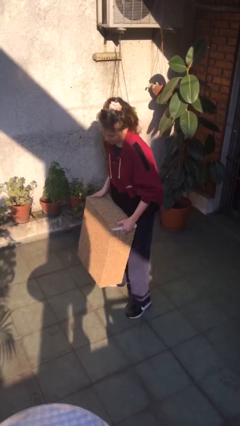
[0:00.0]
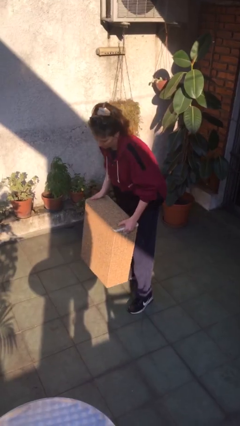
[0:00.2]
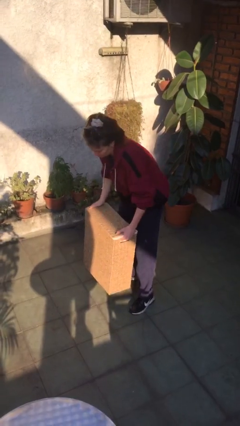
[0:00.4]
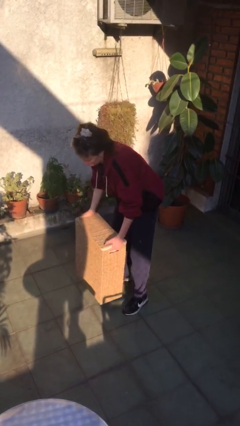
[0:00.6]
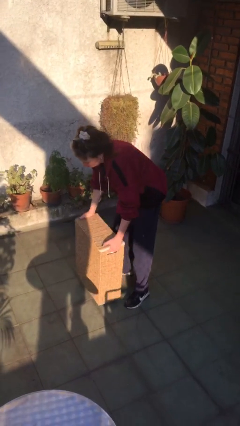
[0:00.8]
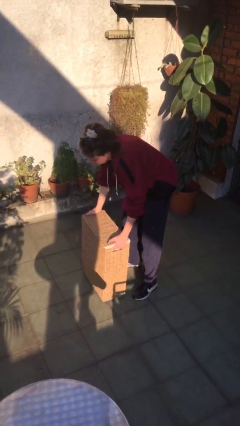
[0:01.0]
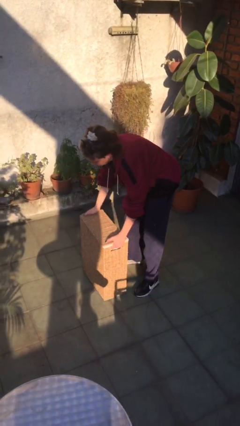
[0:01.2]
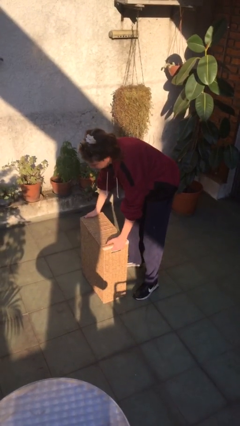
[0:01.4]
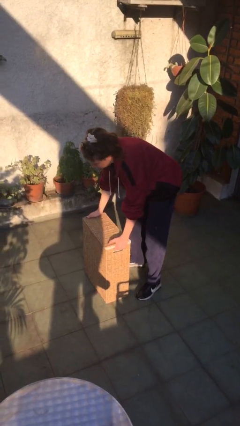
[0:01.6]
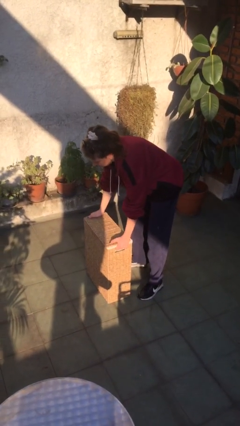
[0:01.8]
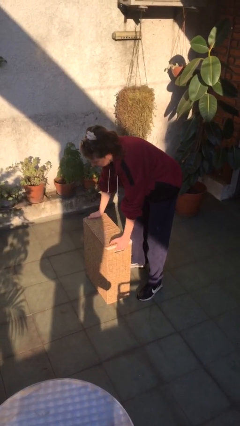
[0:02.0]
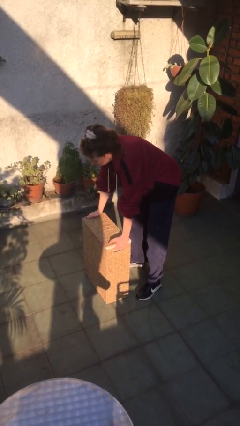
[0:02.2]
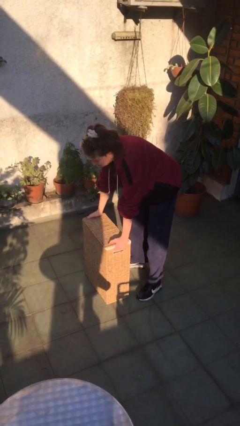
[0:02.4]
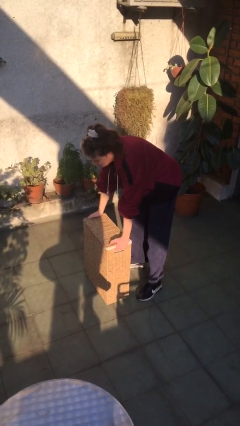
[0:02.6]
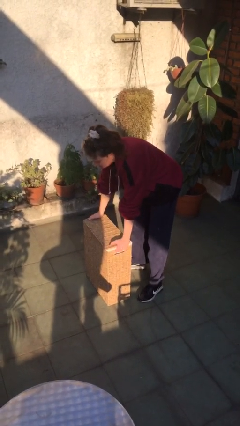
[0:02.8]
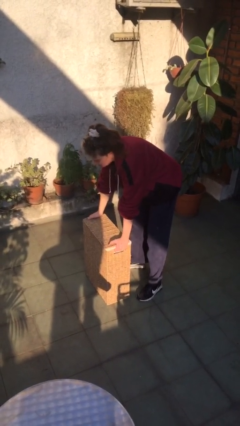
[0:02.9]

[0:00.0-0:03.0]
person puts down object on floor

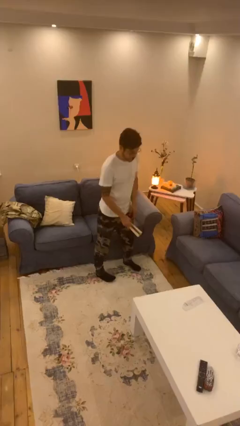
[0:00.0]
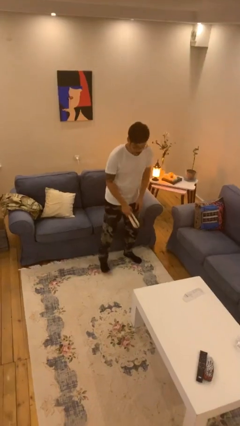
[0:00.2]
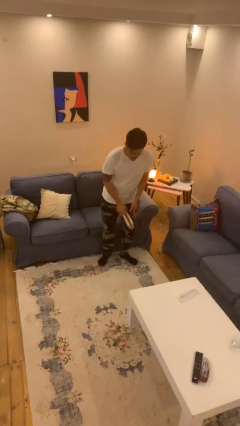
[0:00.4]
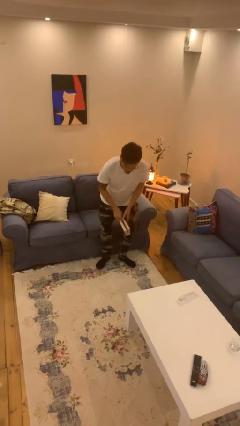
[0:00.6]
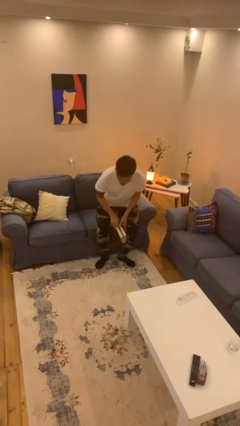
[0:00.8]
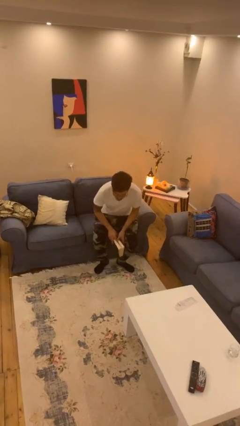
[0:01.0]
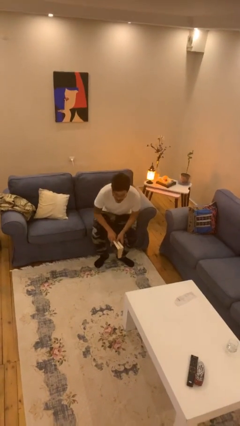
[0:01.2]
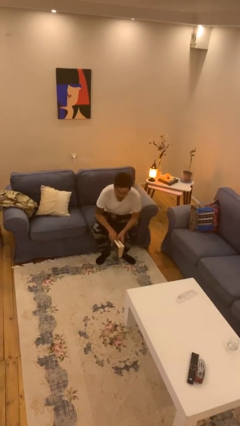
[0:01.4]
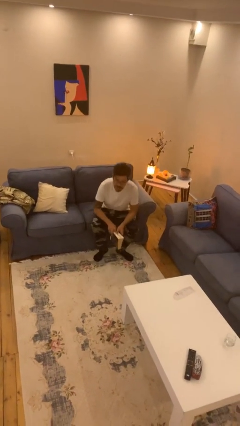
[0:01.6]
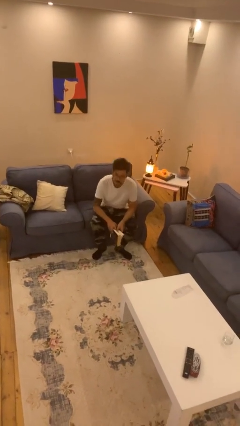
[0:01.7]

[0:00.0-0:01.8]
person sits down

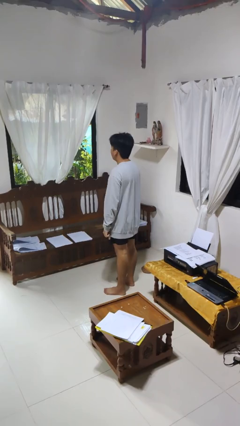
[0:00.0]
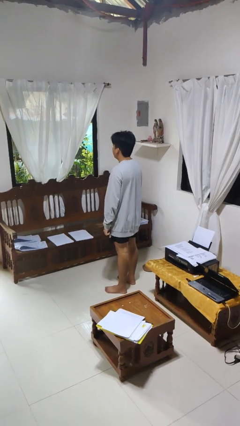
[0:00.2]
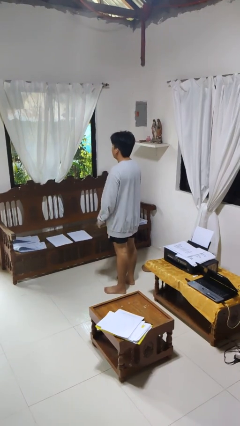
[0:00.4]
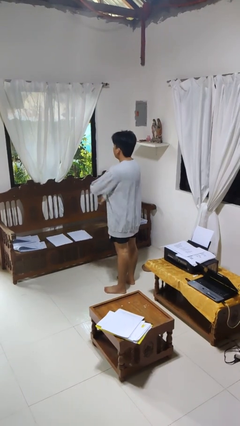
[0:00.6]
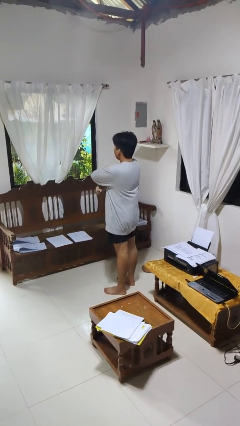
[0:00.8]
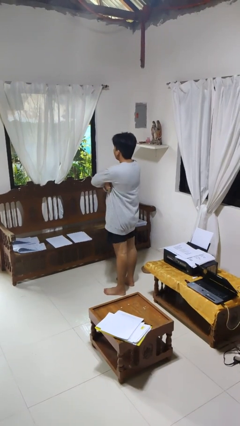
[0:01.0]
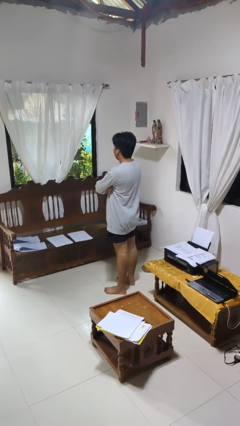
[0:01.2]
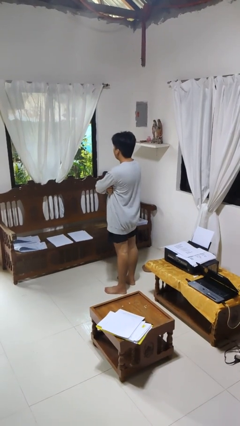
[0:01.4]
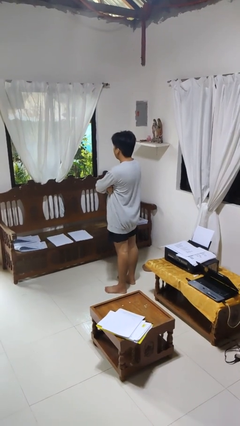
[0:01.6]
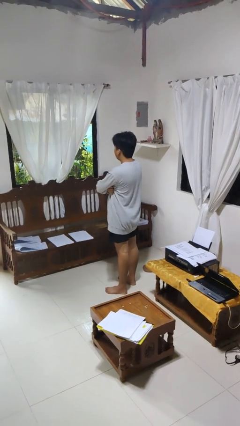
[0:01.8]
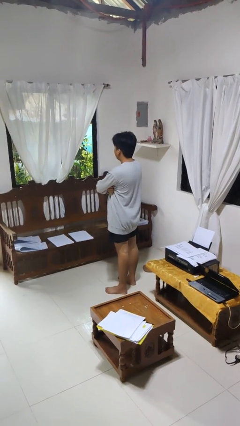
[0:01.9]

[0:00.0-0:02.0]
person gestures arms x

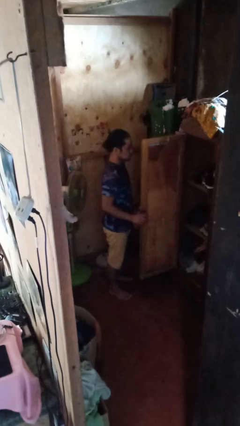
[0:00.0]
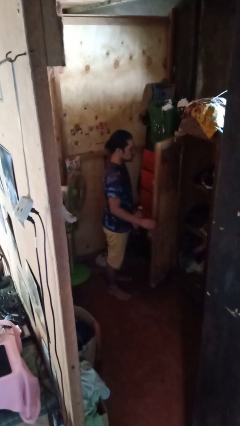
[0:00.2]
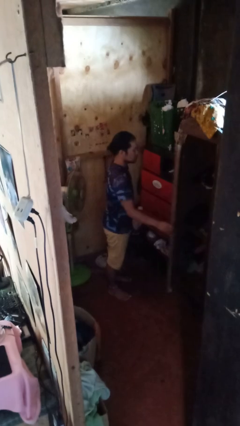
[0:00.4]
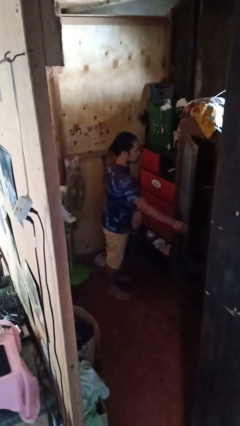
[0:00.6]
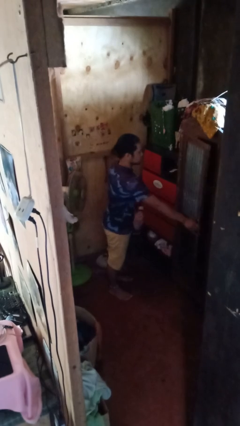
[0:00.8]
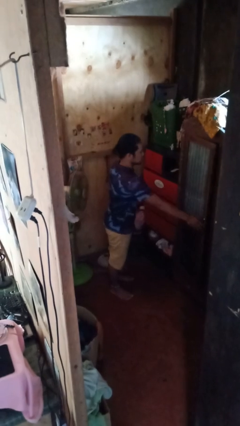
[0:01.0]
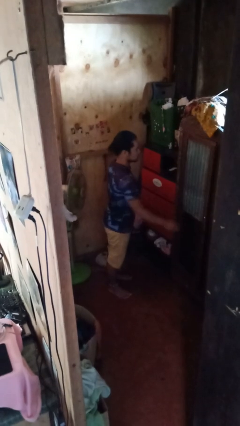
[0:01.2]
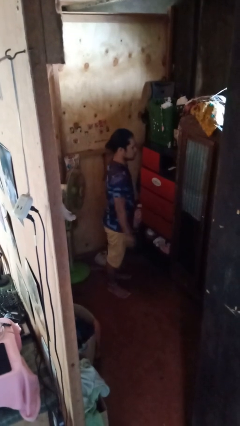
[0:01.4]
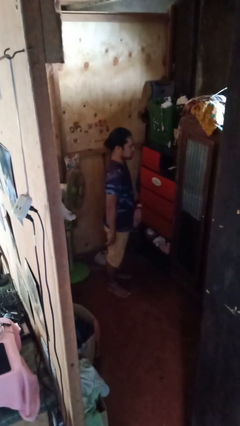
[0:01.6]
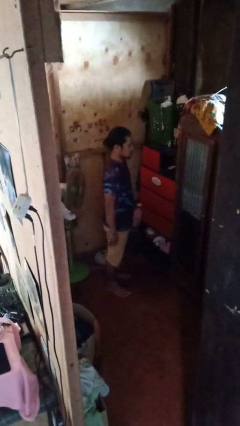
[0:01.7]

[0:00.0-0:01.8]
person closes closet door

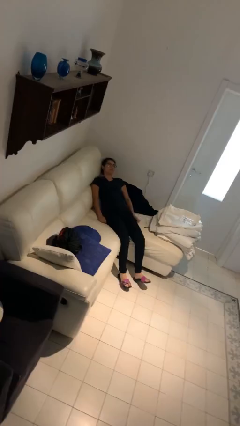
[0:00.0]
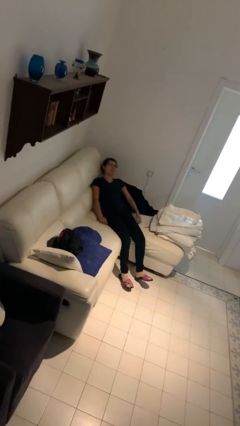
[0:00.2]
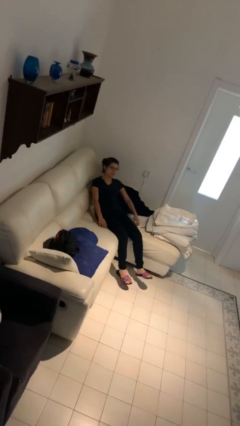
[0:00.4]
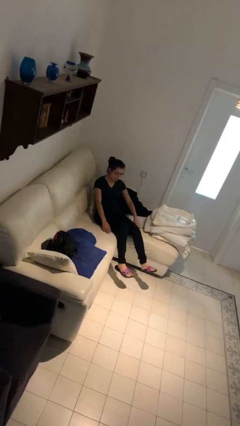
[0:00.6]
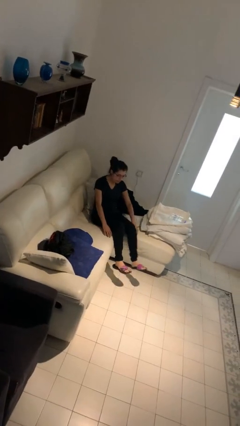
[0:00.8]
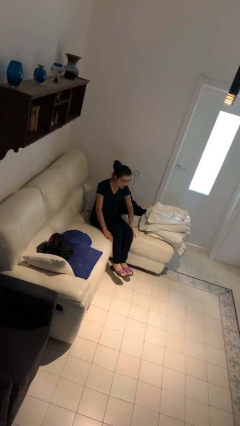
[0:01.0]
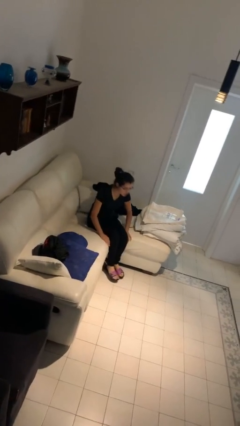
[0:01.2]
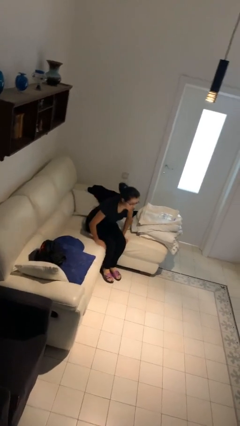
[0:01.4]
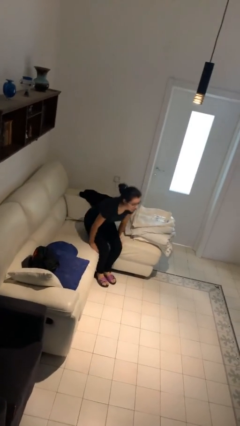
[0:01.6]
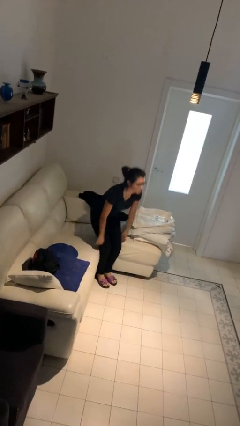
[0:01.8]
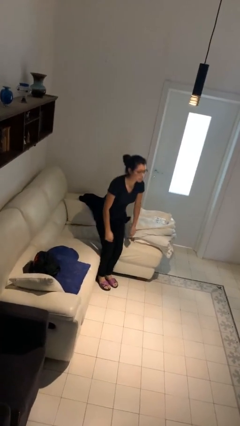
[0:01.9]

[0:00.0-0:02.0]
person stands up

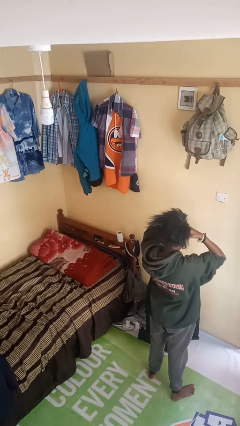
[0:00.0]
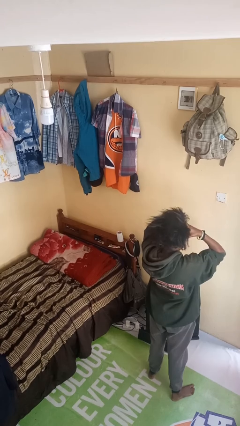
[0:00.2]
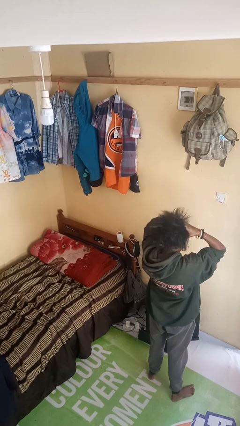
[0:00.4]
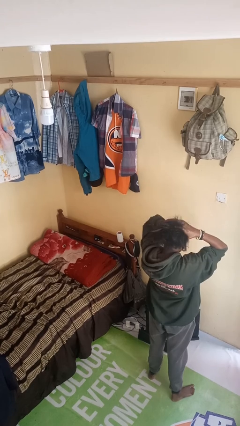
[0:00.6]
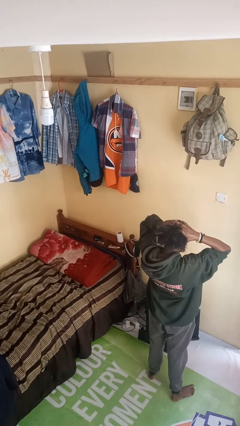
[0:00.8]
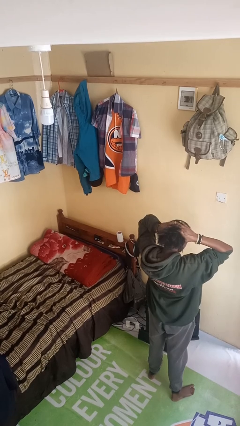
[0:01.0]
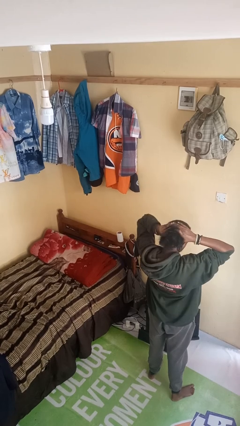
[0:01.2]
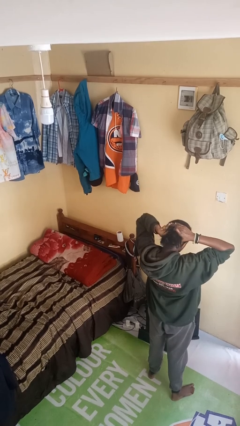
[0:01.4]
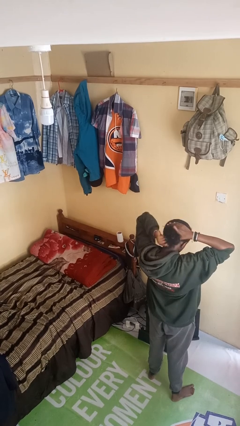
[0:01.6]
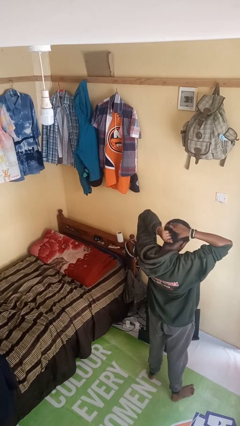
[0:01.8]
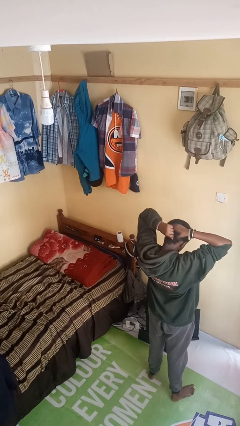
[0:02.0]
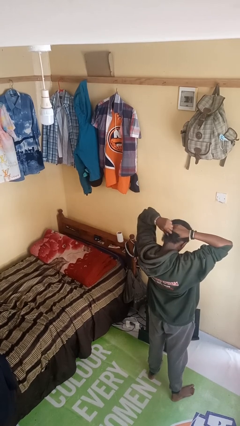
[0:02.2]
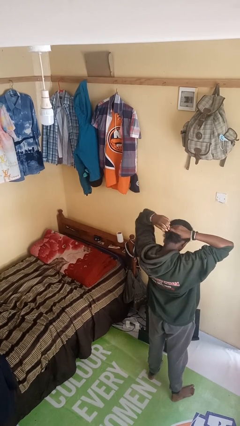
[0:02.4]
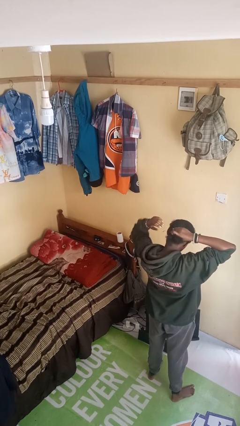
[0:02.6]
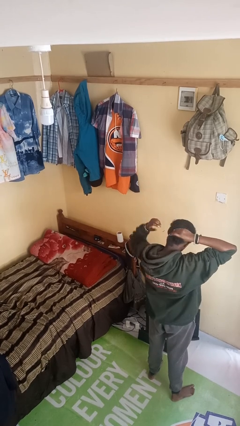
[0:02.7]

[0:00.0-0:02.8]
person strokes hair

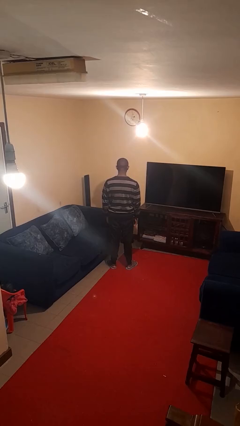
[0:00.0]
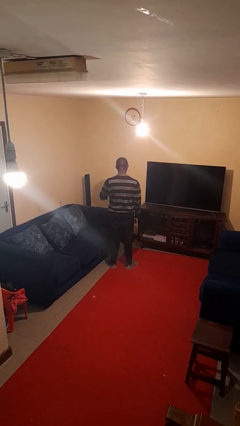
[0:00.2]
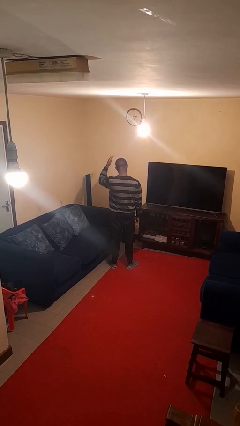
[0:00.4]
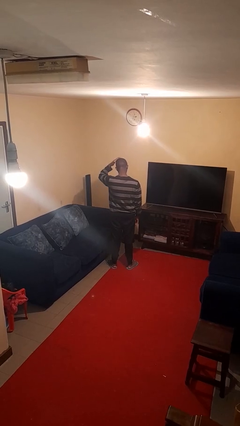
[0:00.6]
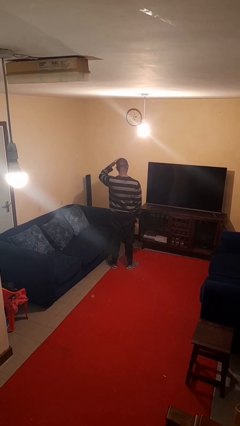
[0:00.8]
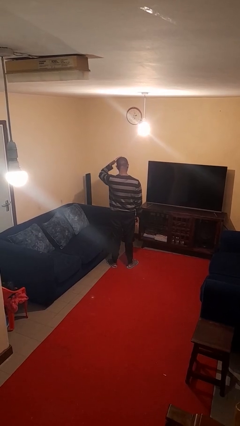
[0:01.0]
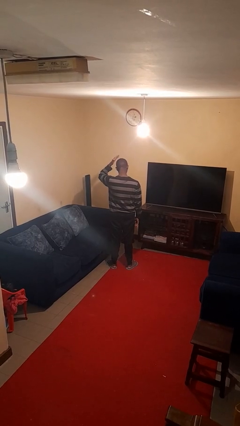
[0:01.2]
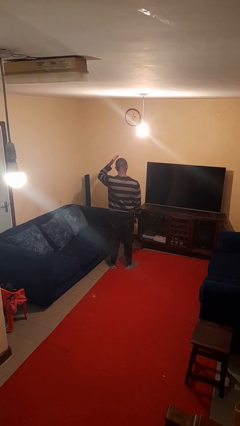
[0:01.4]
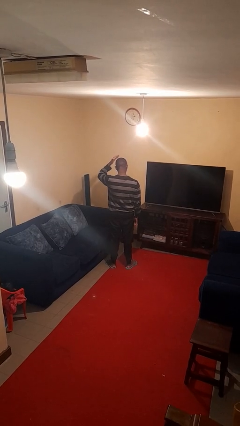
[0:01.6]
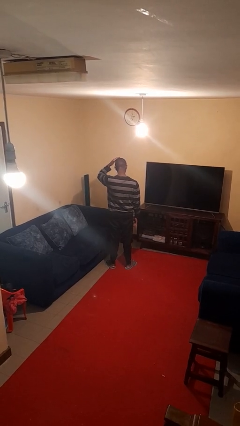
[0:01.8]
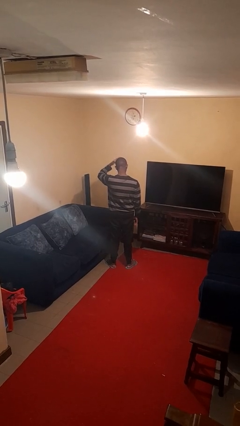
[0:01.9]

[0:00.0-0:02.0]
person pats head

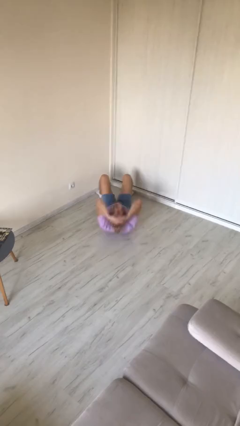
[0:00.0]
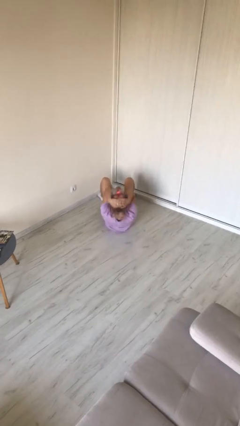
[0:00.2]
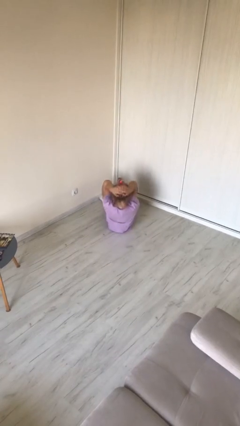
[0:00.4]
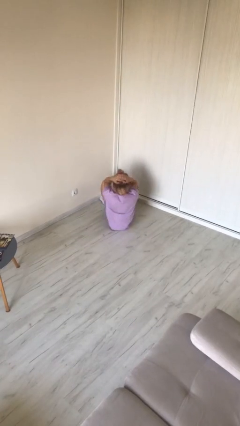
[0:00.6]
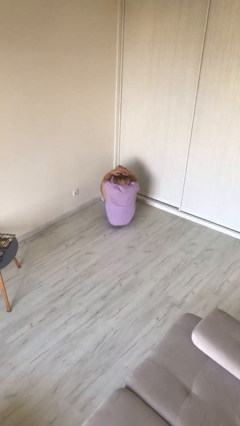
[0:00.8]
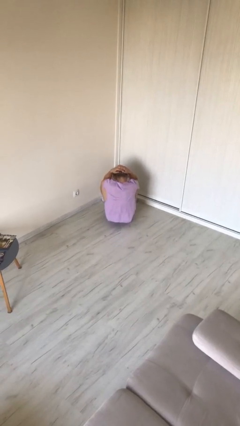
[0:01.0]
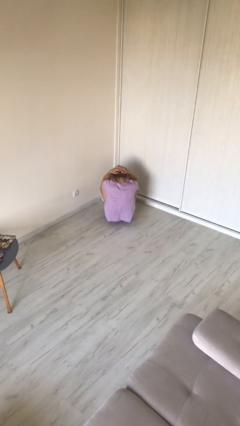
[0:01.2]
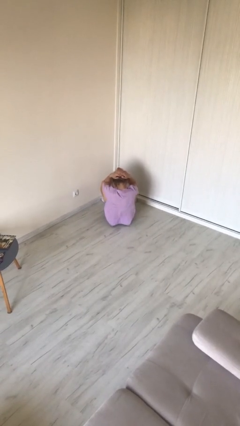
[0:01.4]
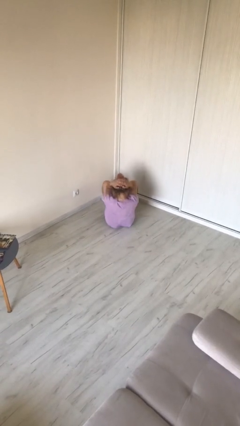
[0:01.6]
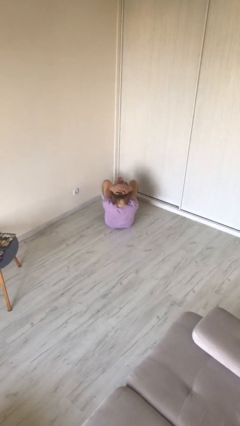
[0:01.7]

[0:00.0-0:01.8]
person exercises with situp
